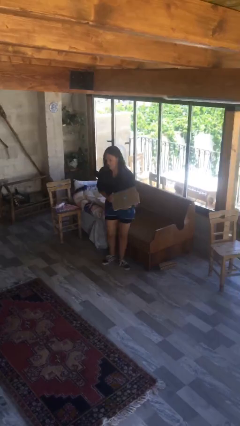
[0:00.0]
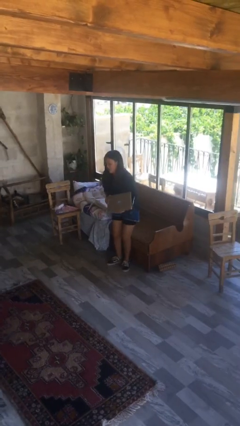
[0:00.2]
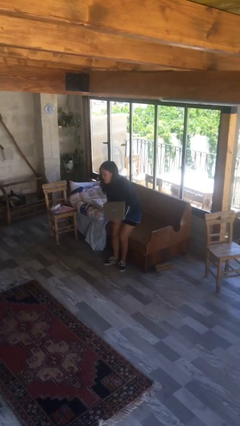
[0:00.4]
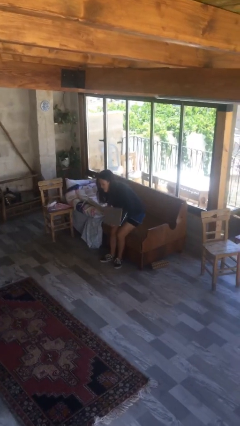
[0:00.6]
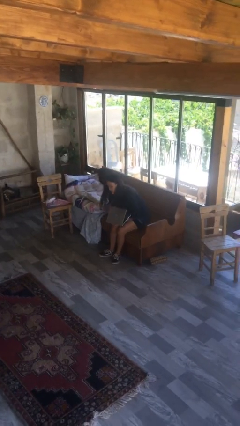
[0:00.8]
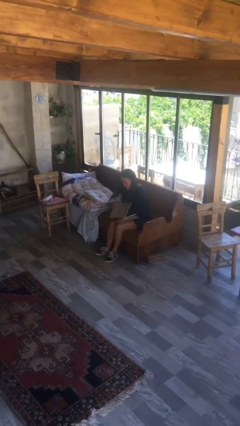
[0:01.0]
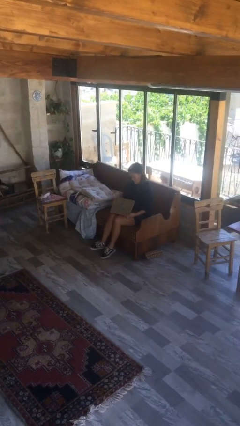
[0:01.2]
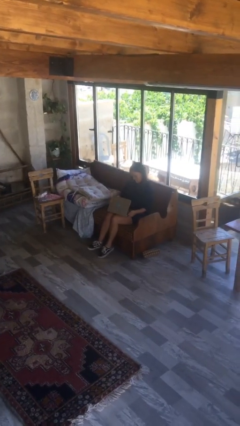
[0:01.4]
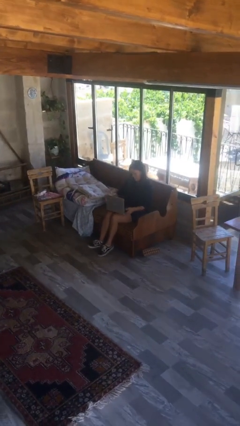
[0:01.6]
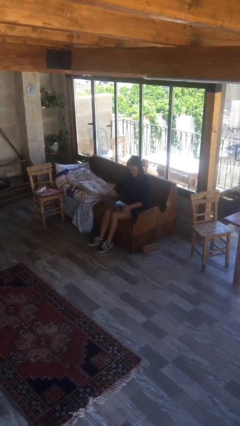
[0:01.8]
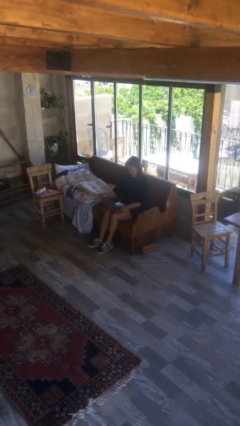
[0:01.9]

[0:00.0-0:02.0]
person sits down

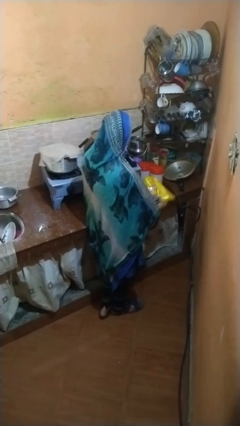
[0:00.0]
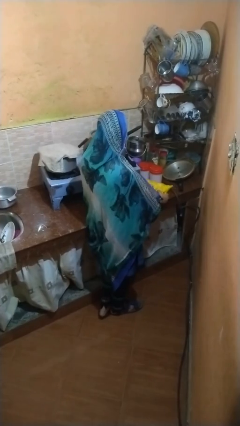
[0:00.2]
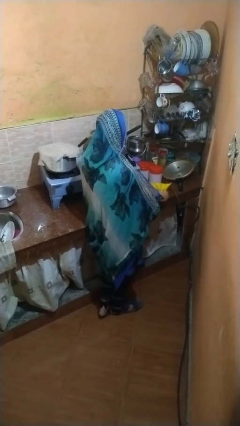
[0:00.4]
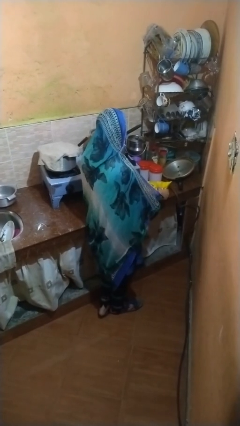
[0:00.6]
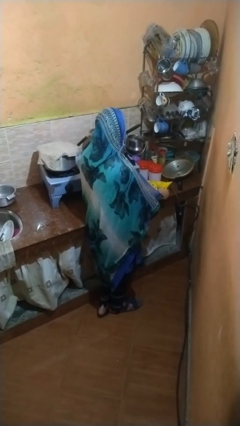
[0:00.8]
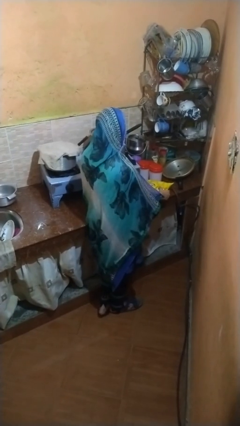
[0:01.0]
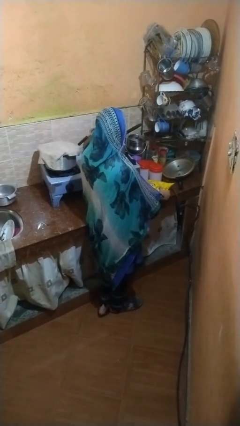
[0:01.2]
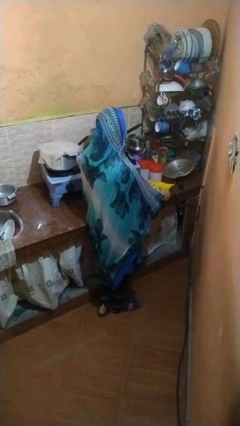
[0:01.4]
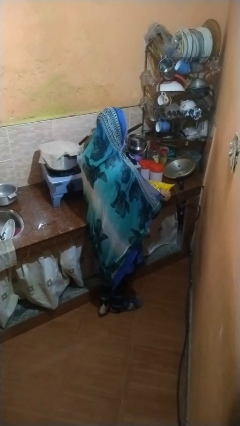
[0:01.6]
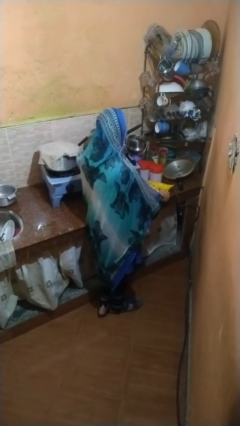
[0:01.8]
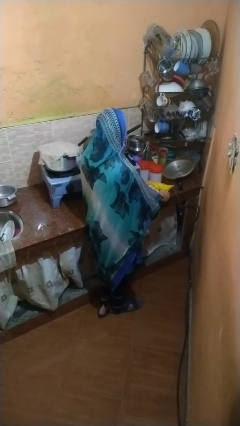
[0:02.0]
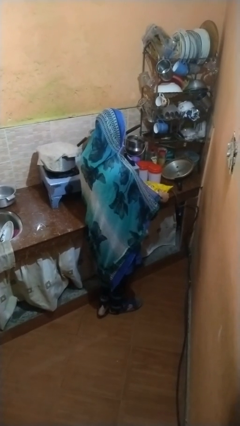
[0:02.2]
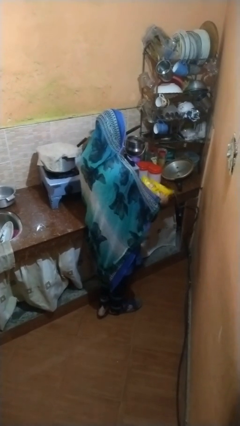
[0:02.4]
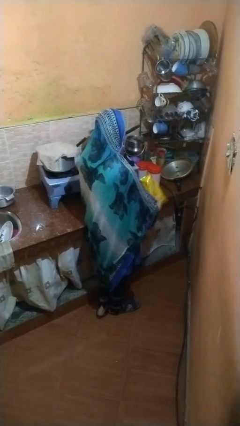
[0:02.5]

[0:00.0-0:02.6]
person pours into bowl

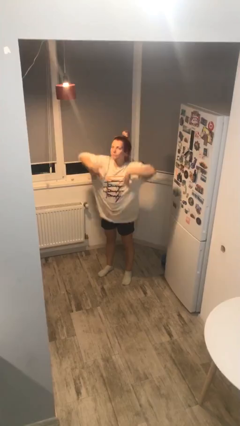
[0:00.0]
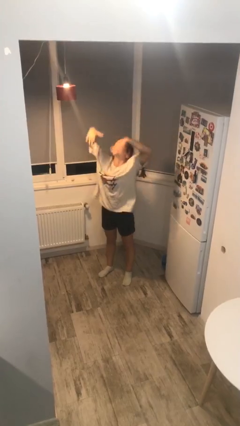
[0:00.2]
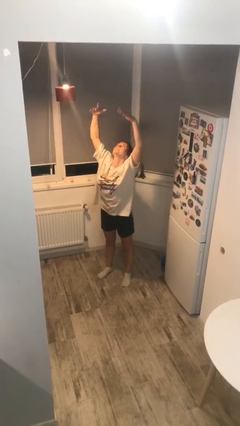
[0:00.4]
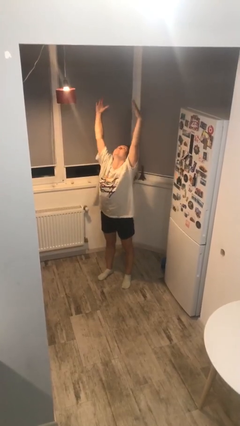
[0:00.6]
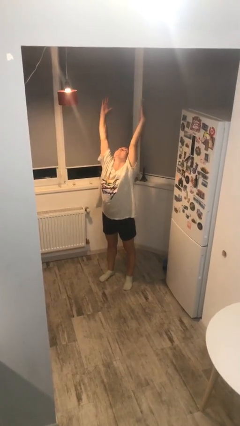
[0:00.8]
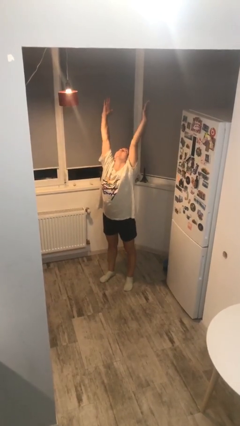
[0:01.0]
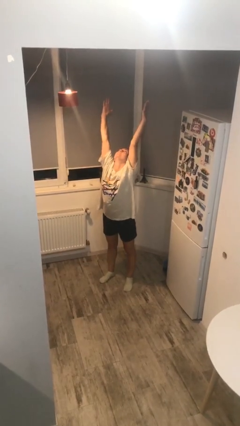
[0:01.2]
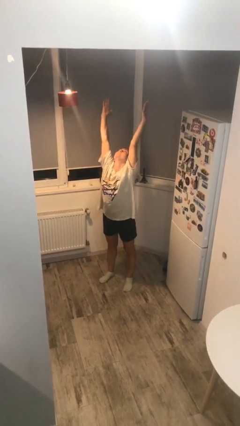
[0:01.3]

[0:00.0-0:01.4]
person stretches arms over head

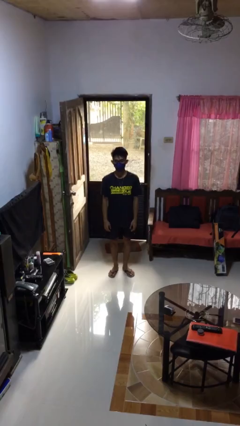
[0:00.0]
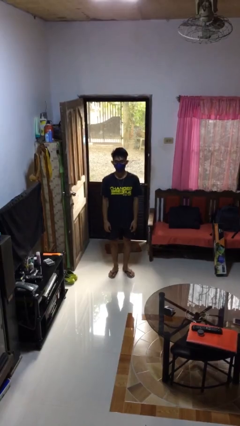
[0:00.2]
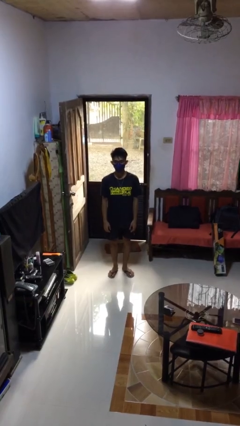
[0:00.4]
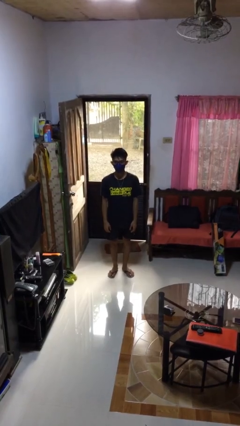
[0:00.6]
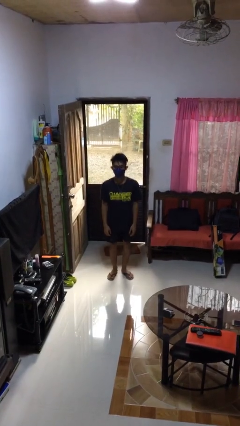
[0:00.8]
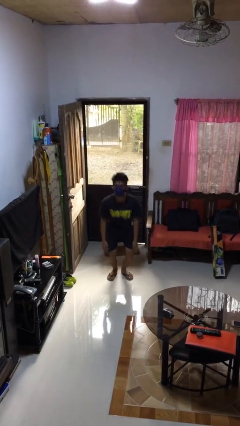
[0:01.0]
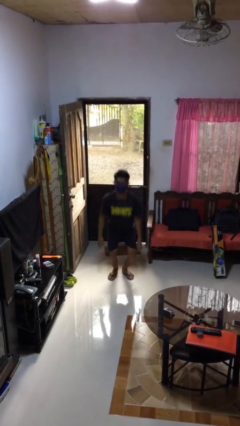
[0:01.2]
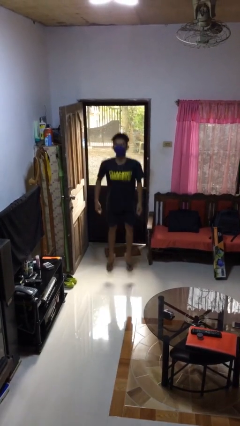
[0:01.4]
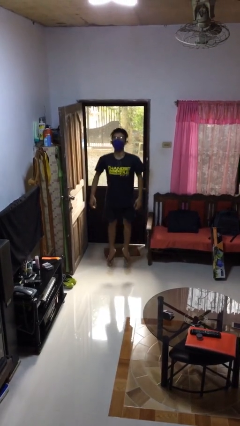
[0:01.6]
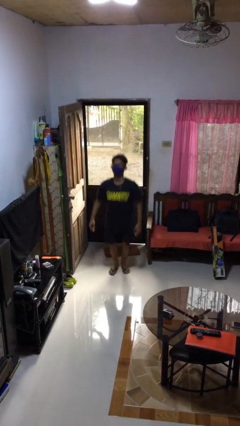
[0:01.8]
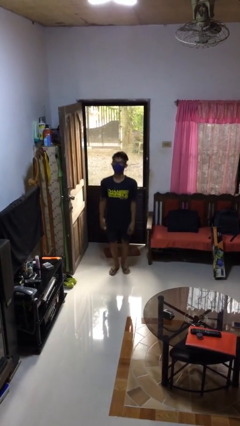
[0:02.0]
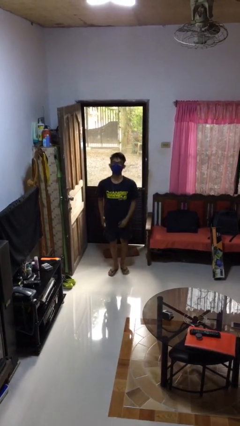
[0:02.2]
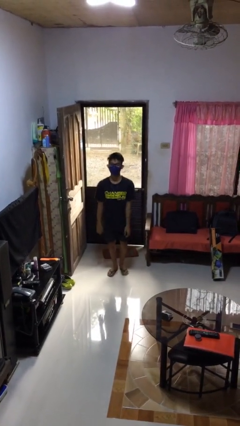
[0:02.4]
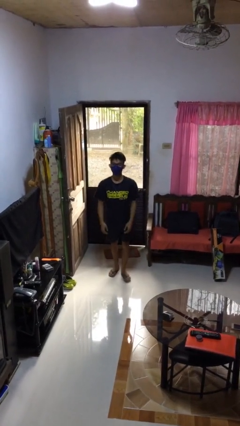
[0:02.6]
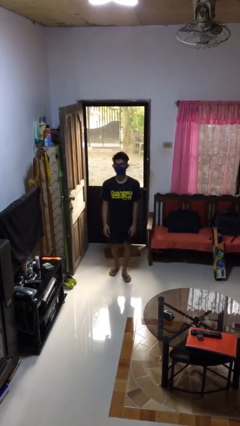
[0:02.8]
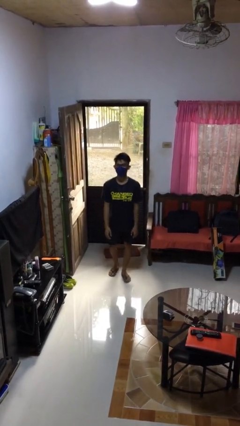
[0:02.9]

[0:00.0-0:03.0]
person jumps

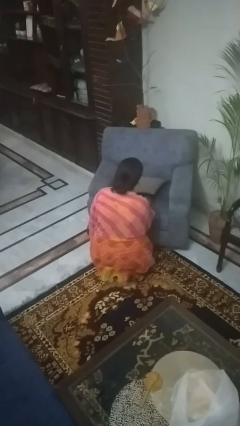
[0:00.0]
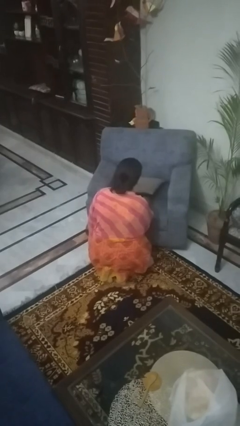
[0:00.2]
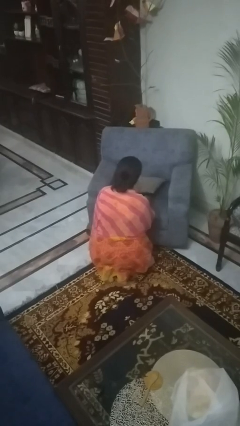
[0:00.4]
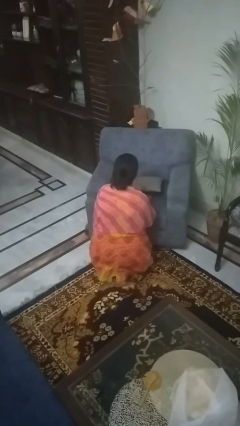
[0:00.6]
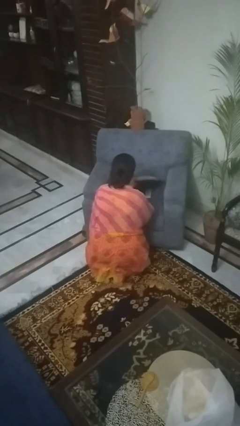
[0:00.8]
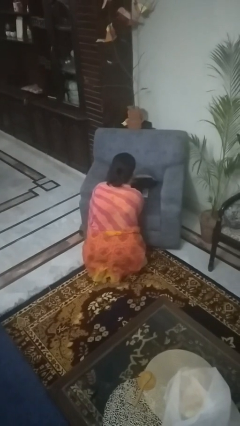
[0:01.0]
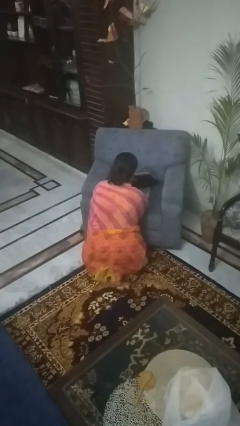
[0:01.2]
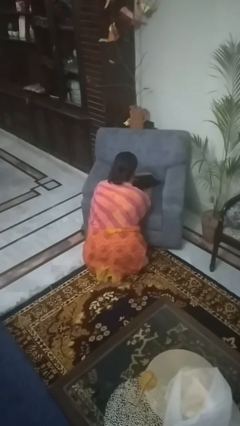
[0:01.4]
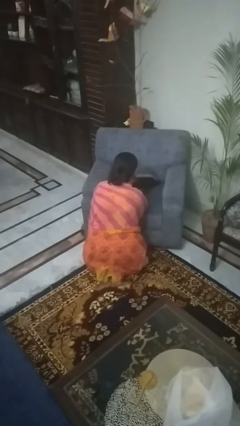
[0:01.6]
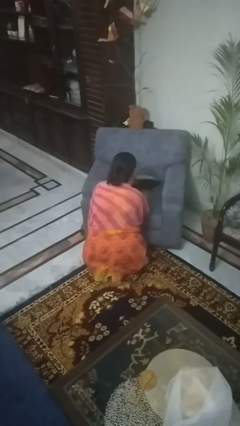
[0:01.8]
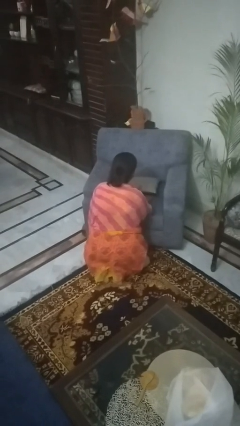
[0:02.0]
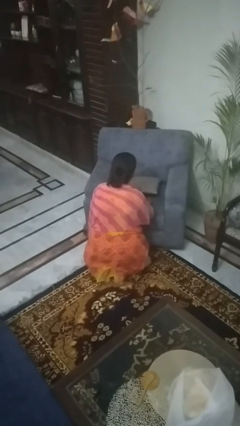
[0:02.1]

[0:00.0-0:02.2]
person searches in couch

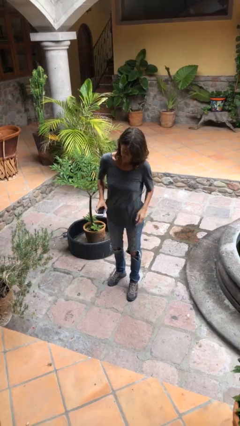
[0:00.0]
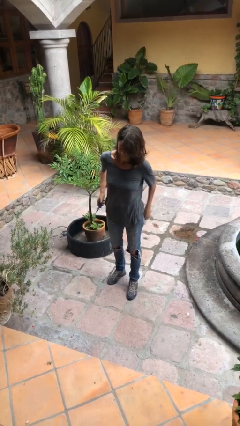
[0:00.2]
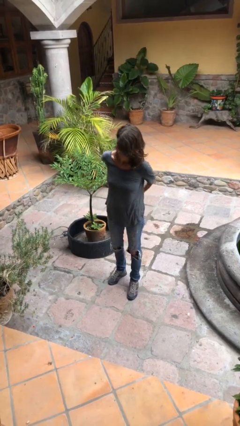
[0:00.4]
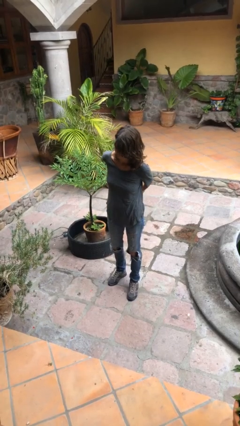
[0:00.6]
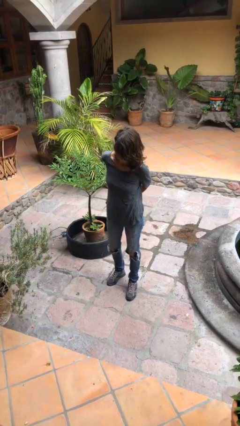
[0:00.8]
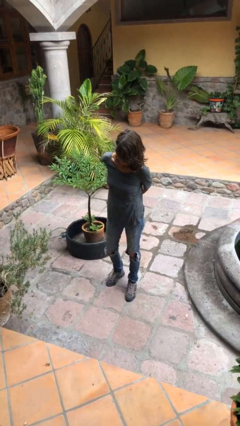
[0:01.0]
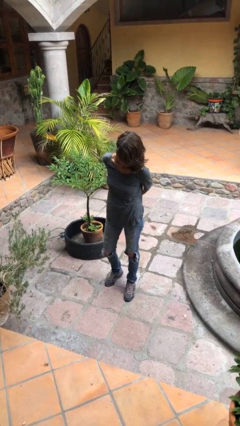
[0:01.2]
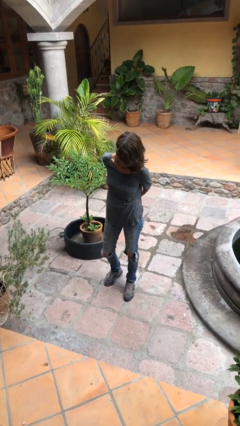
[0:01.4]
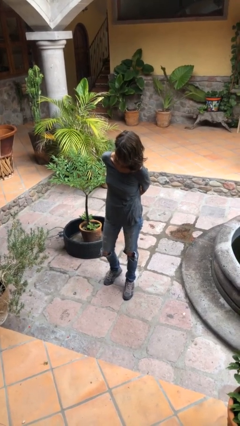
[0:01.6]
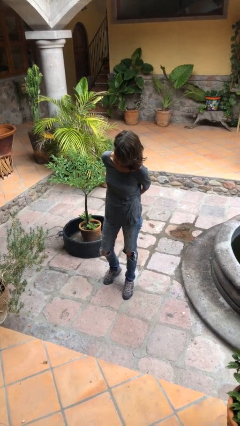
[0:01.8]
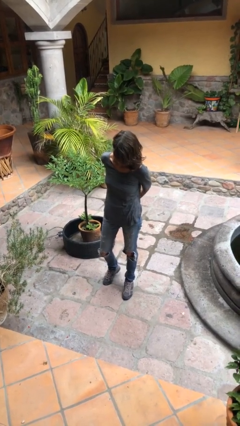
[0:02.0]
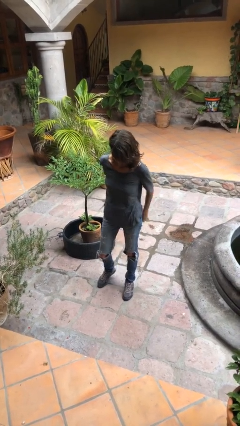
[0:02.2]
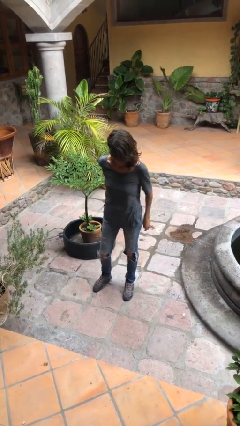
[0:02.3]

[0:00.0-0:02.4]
person puts phone into pocket

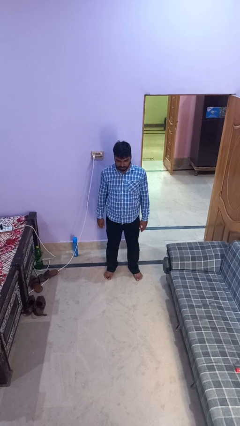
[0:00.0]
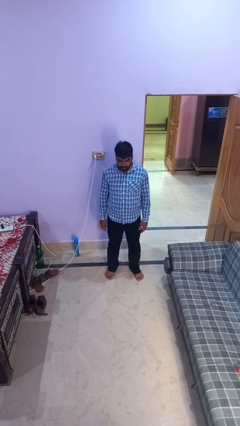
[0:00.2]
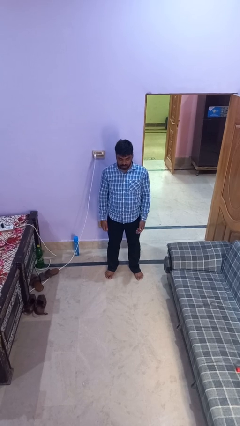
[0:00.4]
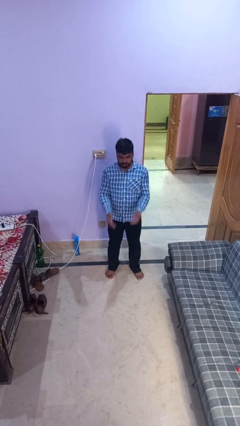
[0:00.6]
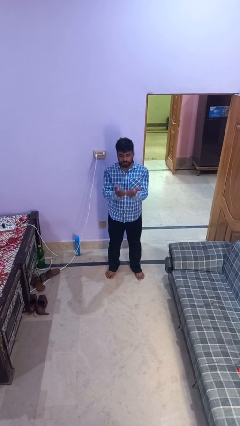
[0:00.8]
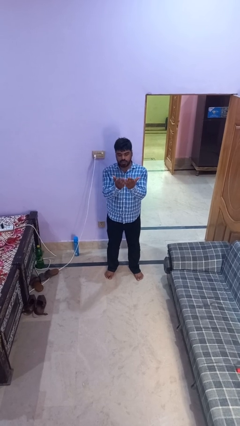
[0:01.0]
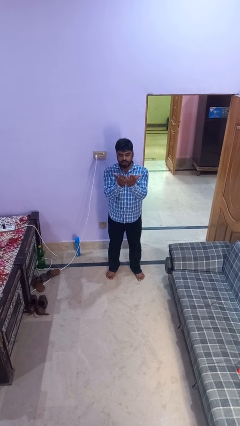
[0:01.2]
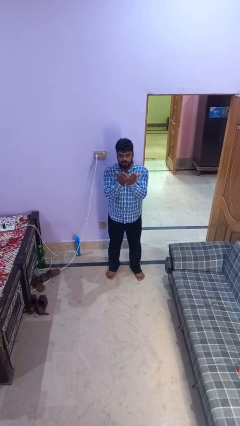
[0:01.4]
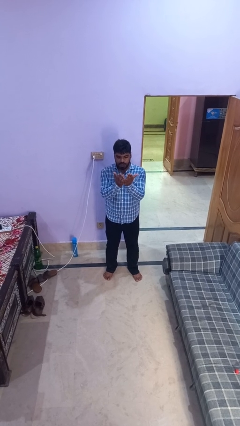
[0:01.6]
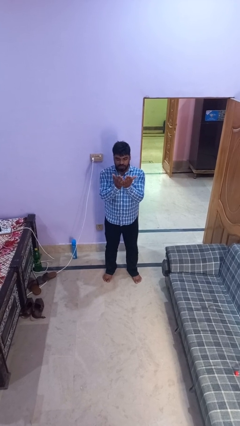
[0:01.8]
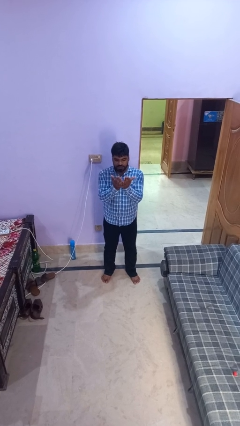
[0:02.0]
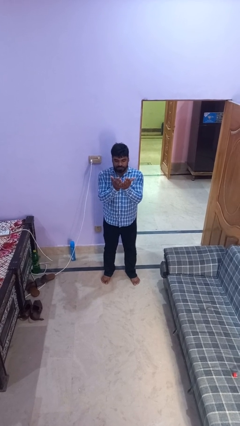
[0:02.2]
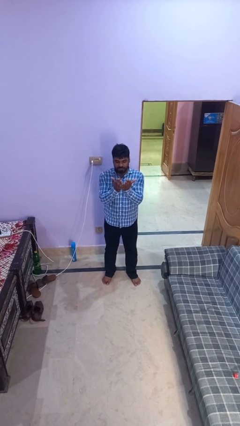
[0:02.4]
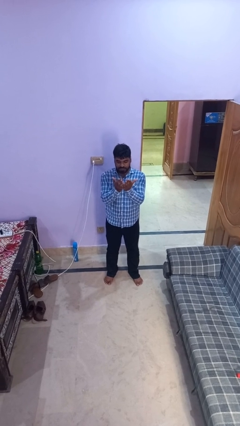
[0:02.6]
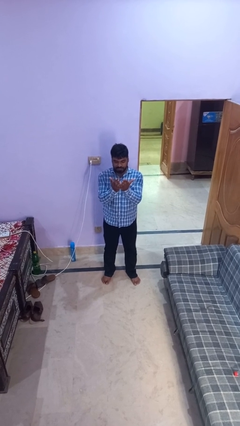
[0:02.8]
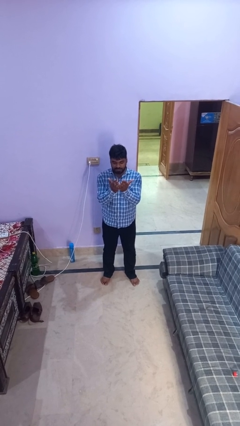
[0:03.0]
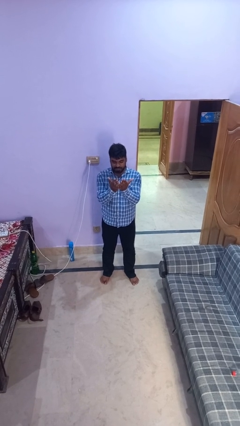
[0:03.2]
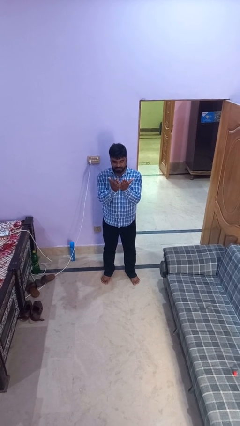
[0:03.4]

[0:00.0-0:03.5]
person prays

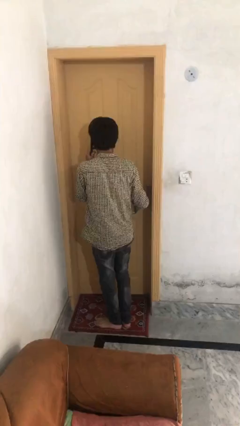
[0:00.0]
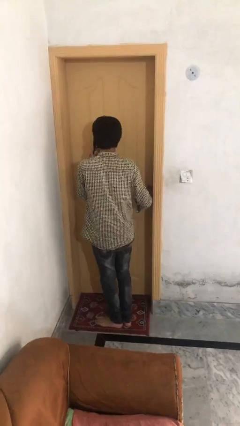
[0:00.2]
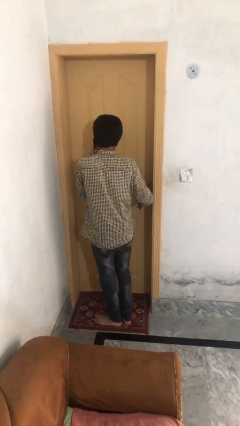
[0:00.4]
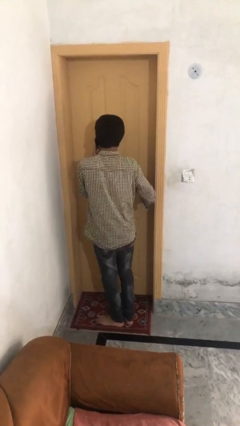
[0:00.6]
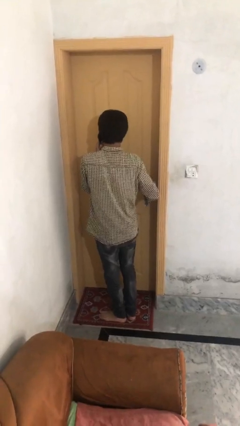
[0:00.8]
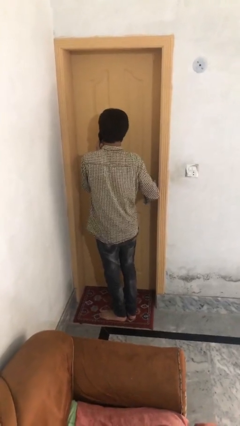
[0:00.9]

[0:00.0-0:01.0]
person closes facility door
